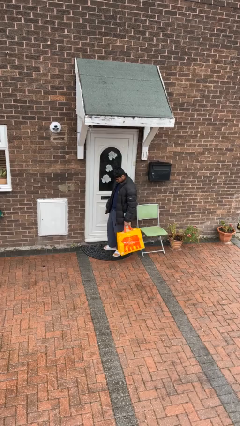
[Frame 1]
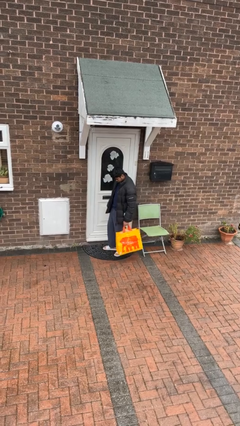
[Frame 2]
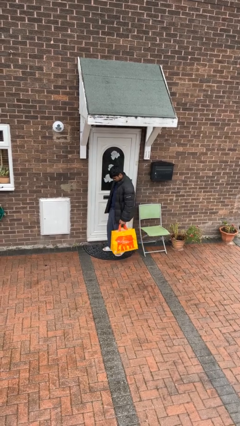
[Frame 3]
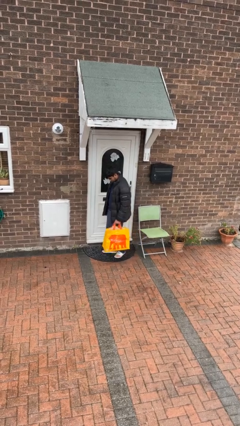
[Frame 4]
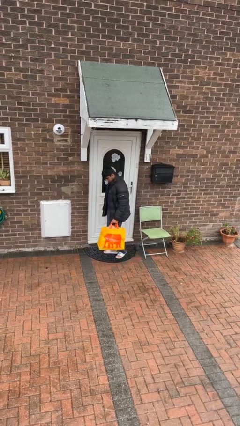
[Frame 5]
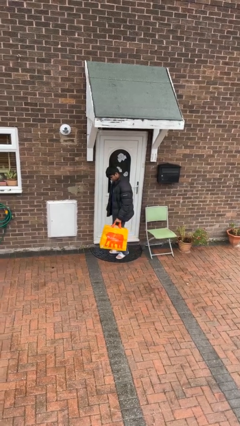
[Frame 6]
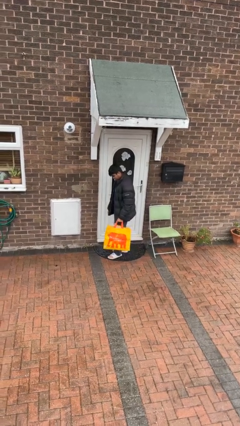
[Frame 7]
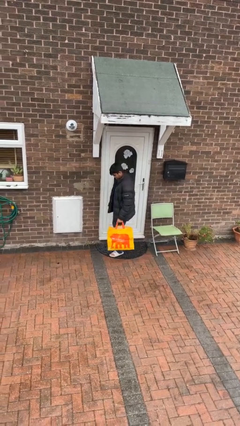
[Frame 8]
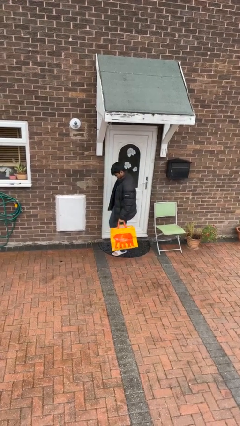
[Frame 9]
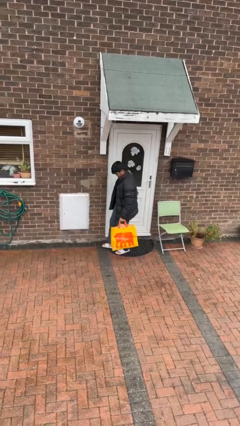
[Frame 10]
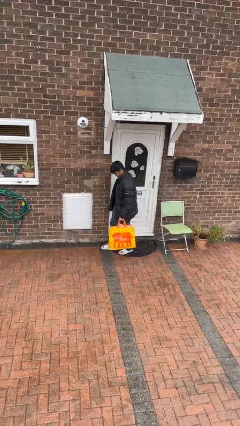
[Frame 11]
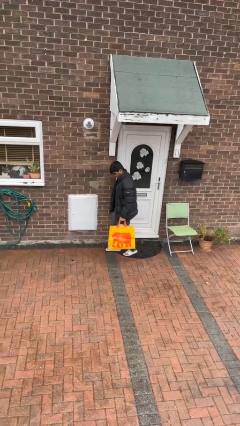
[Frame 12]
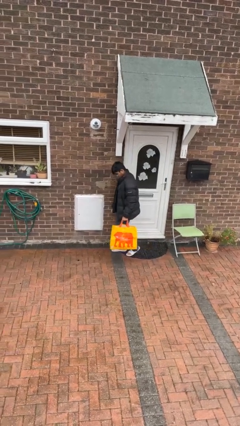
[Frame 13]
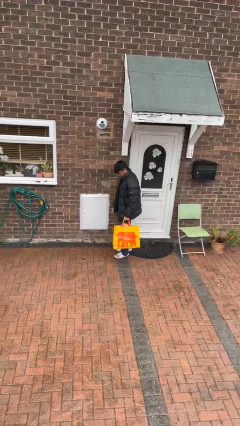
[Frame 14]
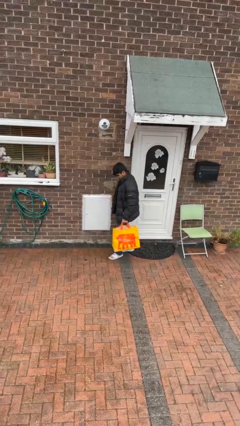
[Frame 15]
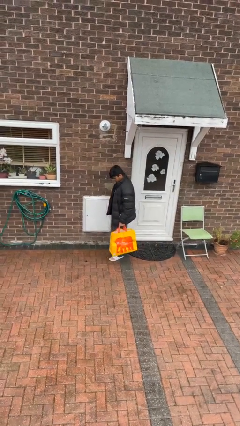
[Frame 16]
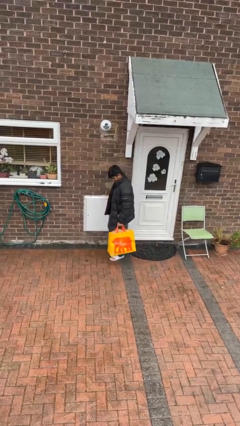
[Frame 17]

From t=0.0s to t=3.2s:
person carries groceries

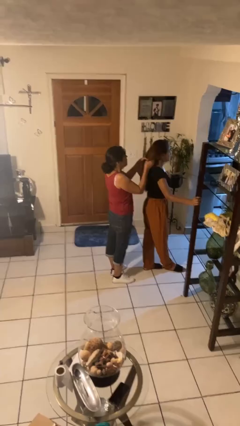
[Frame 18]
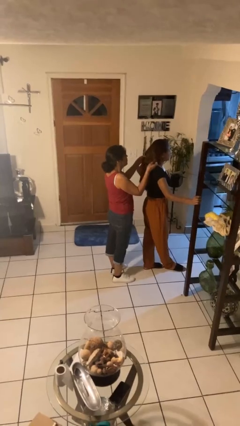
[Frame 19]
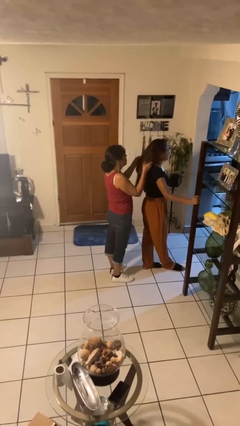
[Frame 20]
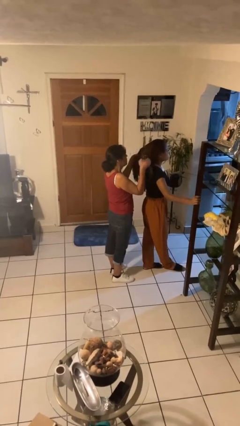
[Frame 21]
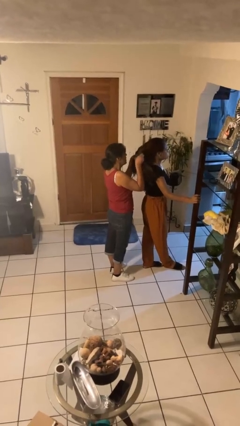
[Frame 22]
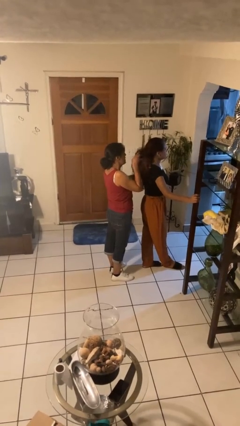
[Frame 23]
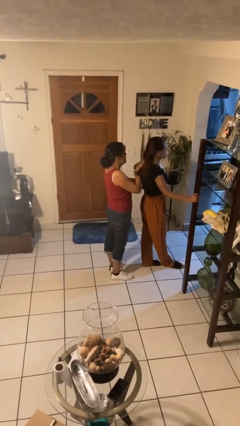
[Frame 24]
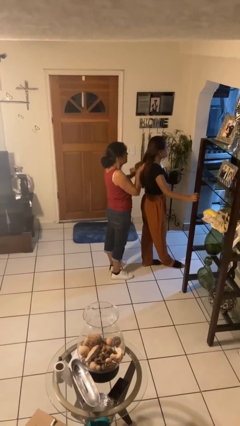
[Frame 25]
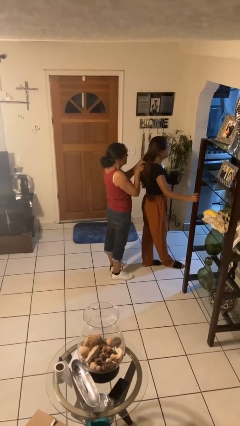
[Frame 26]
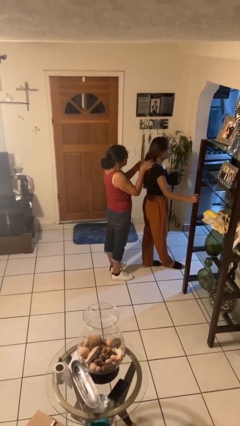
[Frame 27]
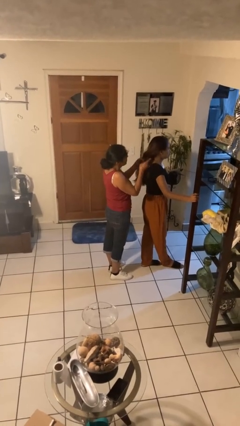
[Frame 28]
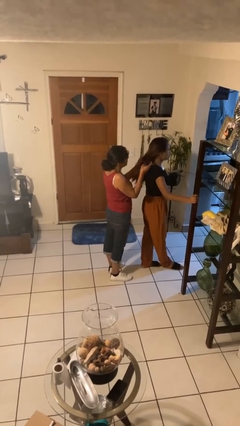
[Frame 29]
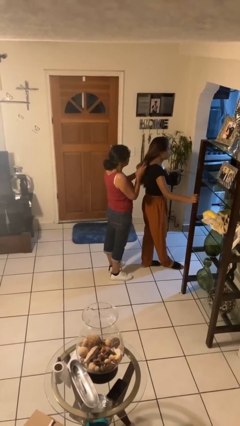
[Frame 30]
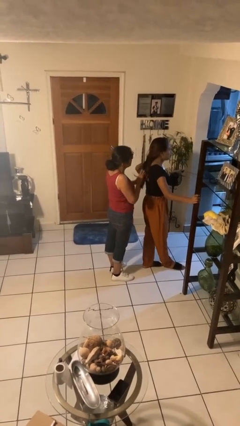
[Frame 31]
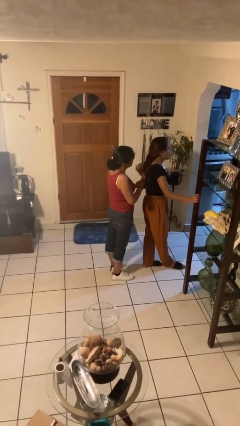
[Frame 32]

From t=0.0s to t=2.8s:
person braids hair of person

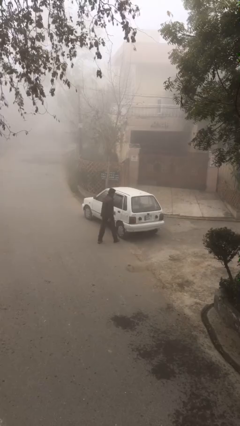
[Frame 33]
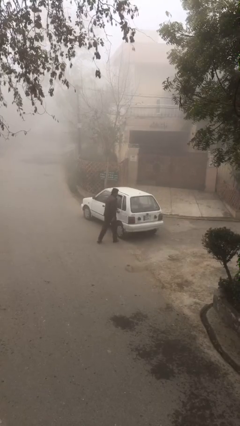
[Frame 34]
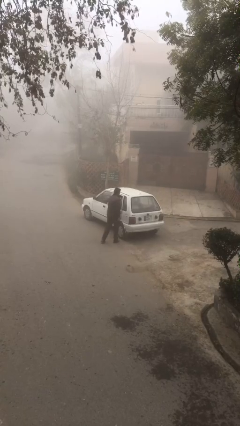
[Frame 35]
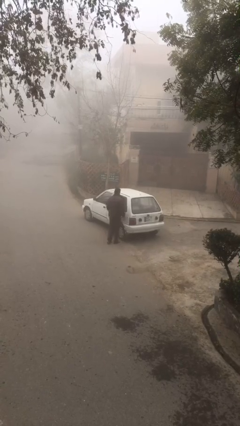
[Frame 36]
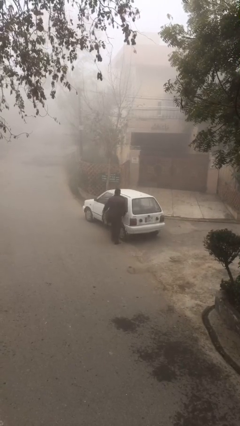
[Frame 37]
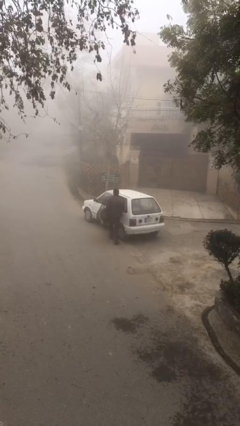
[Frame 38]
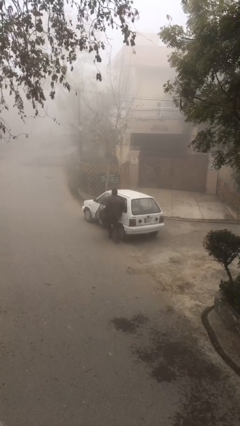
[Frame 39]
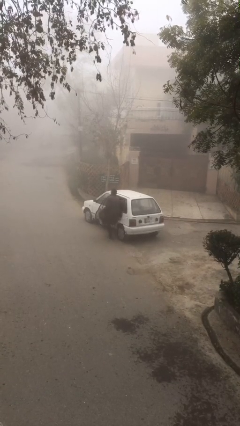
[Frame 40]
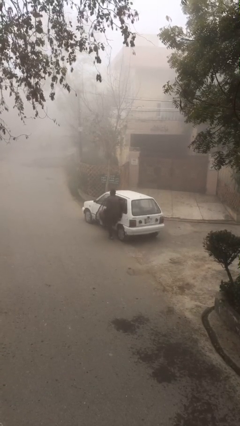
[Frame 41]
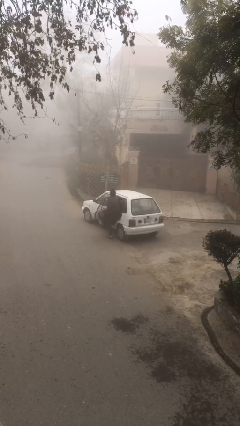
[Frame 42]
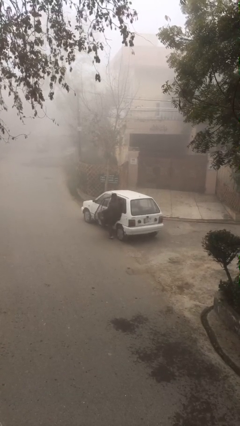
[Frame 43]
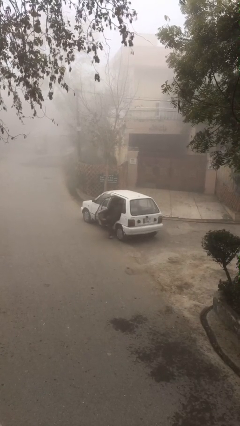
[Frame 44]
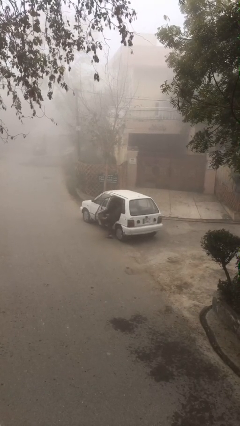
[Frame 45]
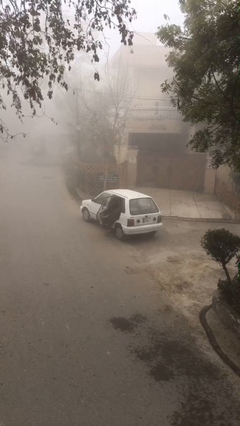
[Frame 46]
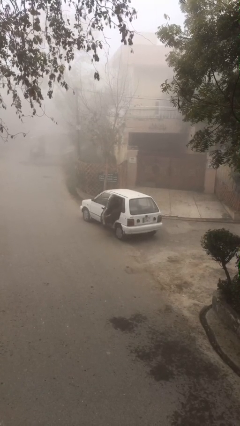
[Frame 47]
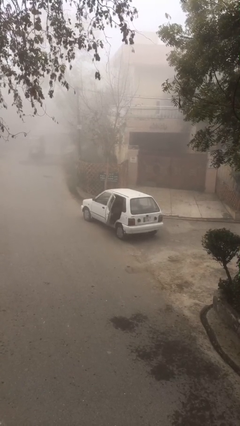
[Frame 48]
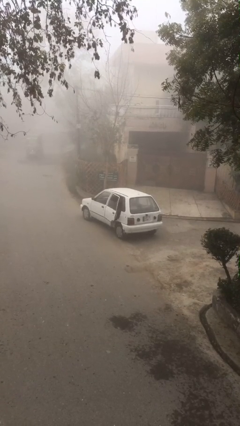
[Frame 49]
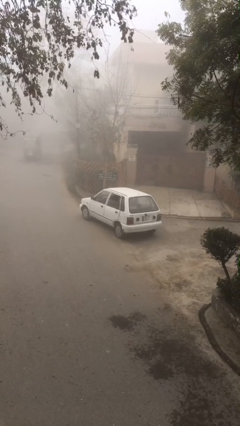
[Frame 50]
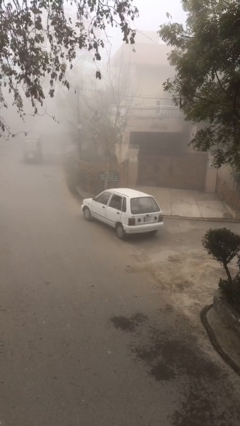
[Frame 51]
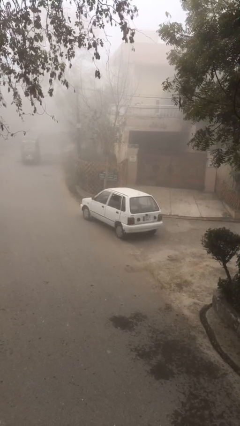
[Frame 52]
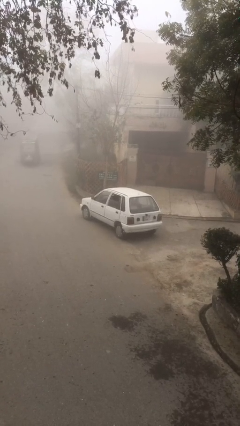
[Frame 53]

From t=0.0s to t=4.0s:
car picks up person

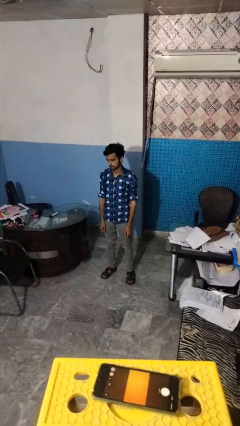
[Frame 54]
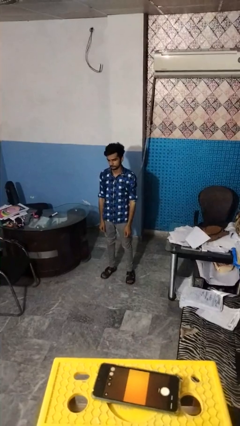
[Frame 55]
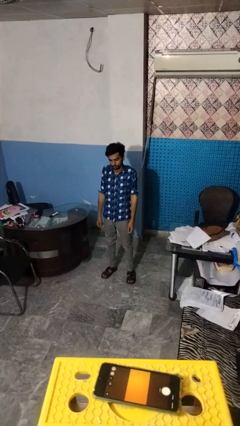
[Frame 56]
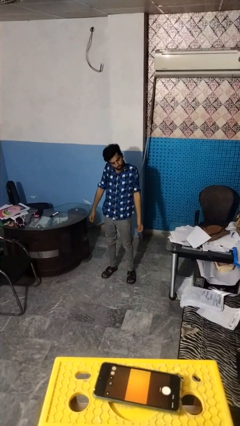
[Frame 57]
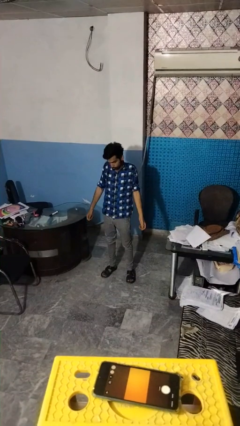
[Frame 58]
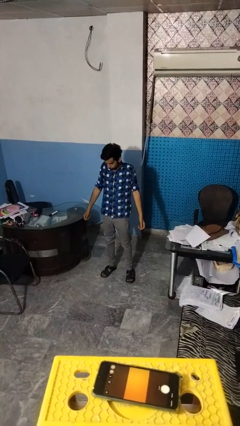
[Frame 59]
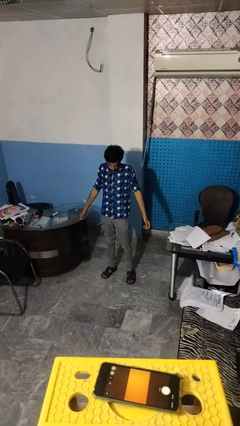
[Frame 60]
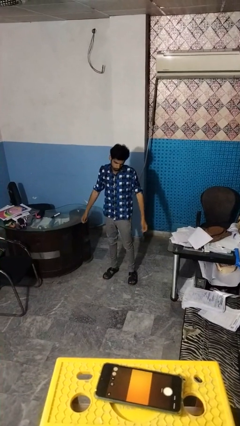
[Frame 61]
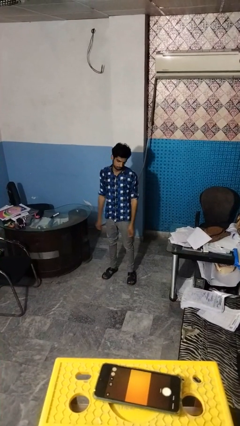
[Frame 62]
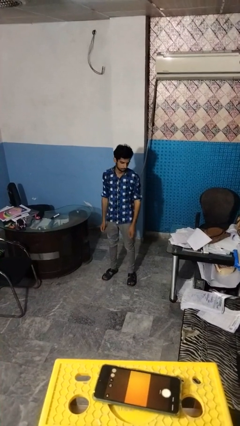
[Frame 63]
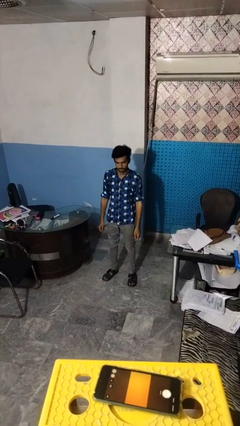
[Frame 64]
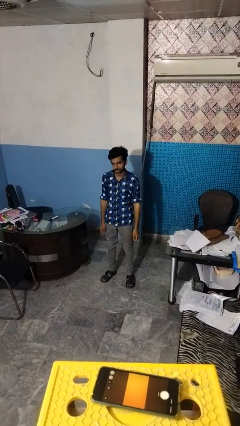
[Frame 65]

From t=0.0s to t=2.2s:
person shrugs

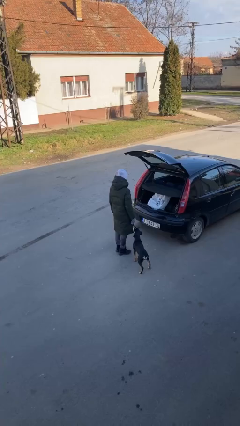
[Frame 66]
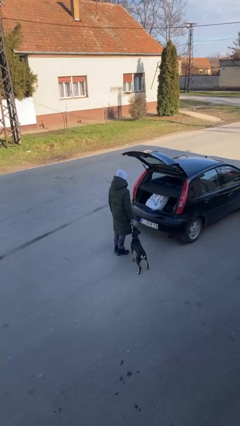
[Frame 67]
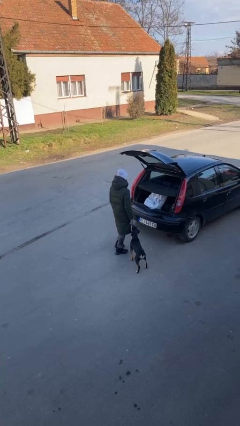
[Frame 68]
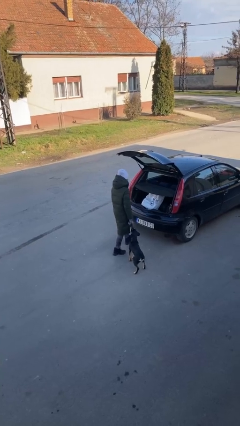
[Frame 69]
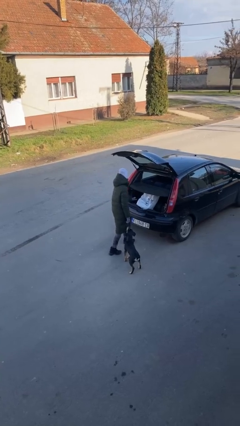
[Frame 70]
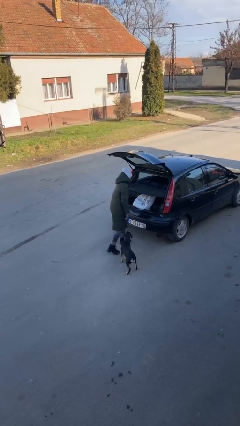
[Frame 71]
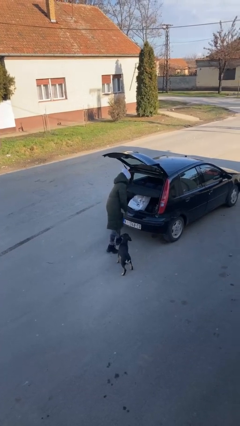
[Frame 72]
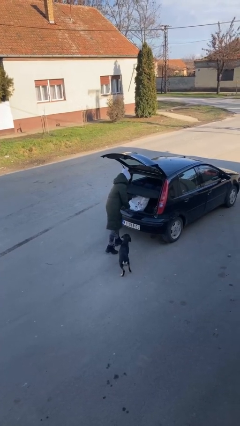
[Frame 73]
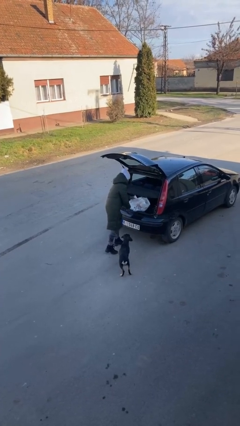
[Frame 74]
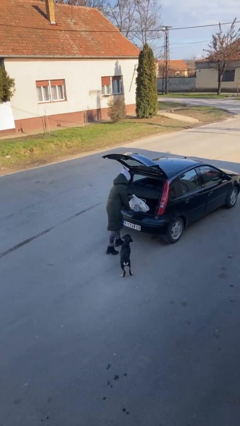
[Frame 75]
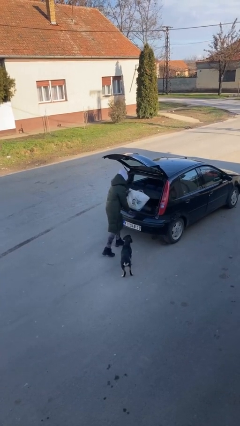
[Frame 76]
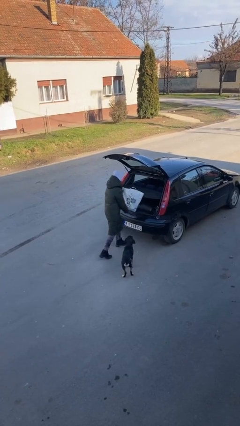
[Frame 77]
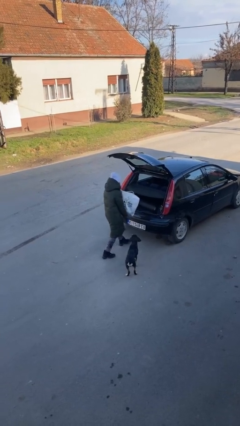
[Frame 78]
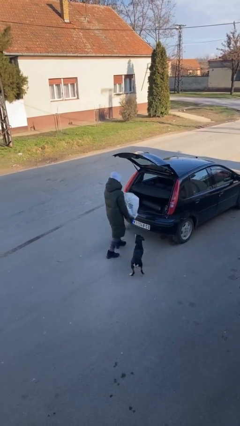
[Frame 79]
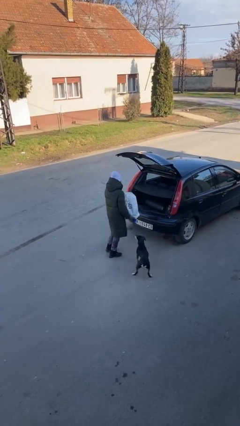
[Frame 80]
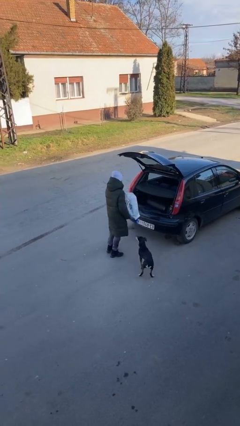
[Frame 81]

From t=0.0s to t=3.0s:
person unloads car

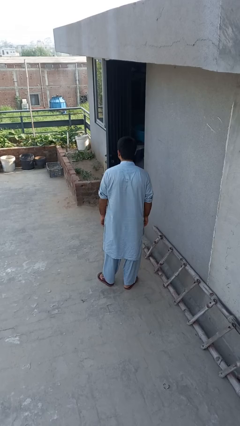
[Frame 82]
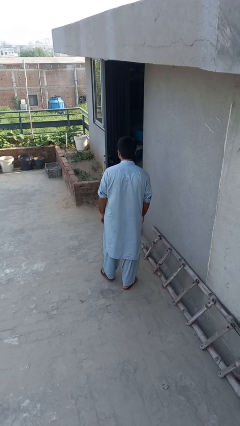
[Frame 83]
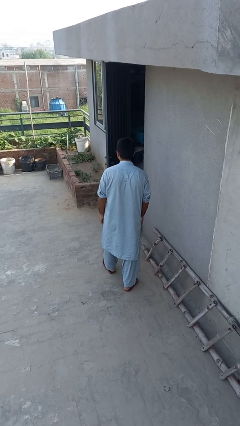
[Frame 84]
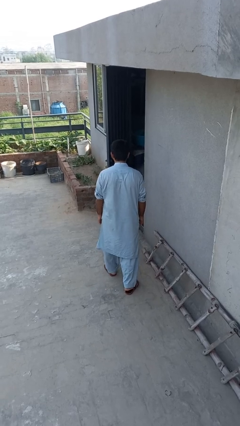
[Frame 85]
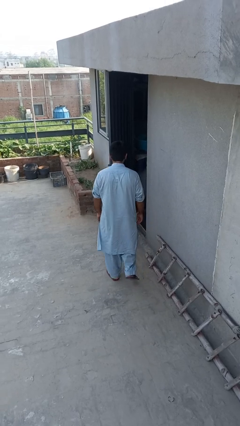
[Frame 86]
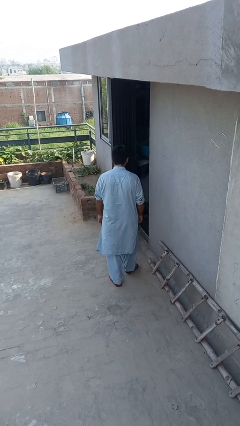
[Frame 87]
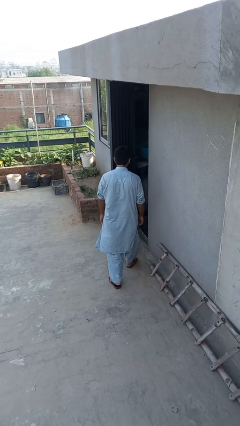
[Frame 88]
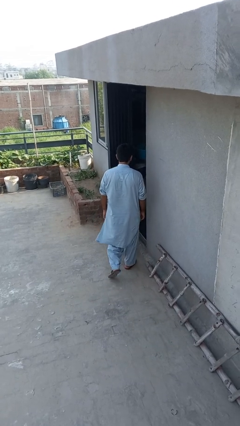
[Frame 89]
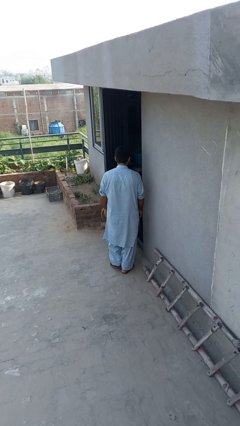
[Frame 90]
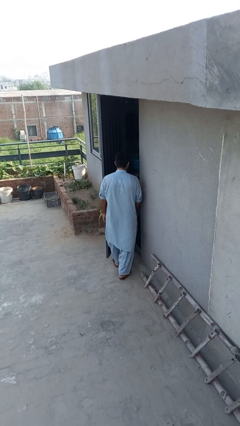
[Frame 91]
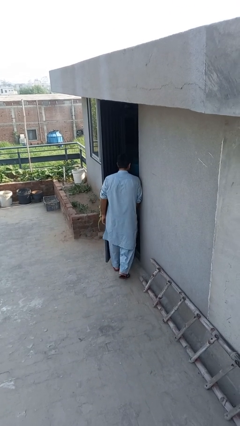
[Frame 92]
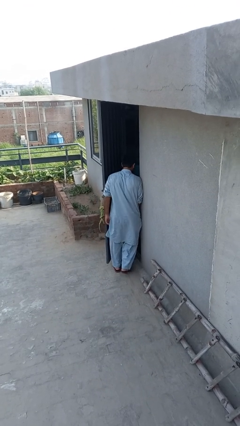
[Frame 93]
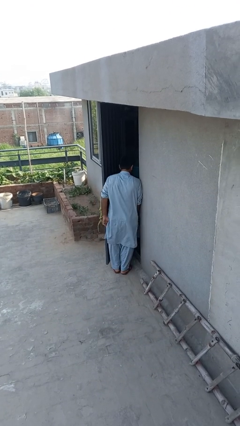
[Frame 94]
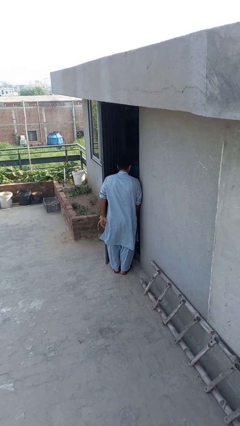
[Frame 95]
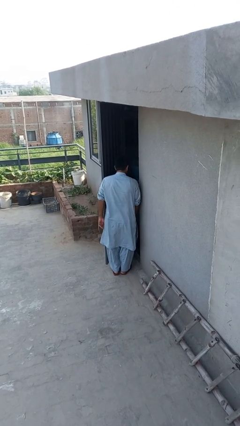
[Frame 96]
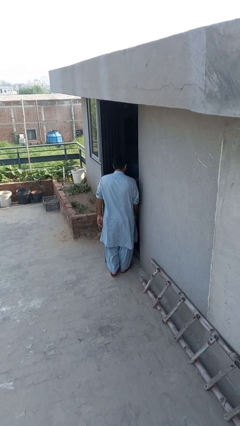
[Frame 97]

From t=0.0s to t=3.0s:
person bumps into wall
